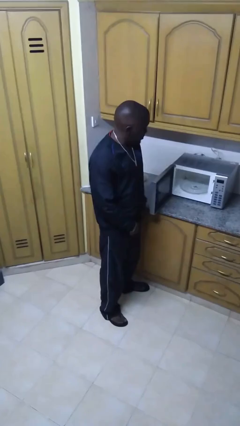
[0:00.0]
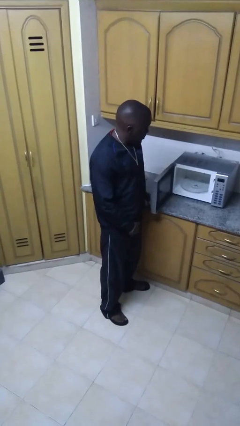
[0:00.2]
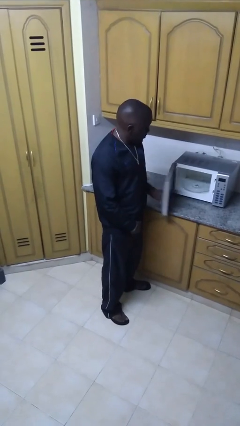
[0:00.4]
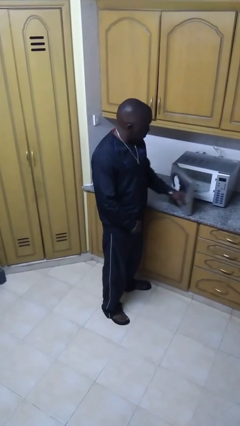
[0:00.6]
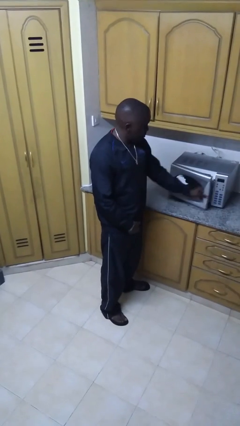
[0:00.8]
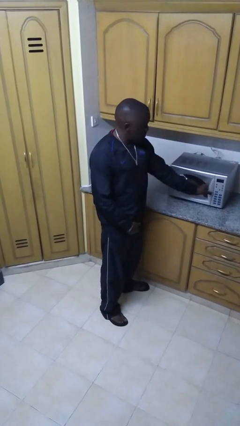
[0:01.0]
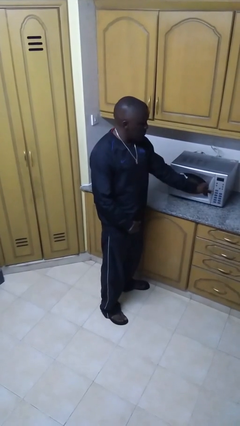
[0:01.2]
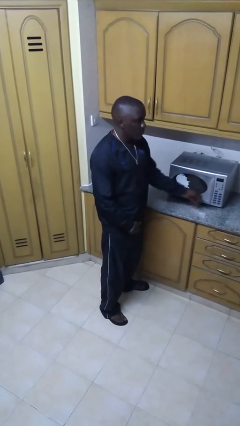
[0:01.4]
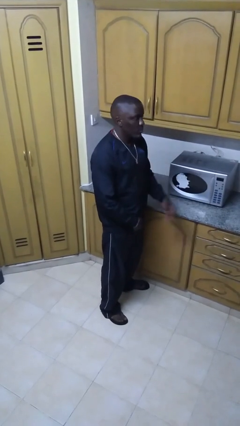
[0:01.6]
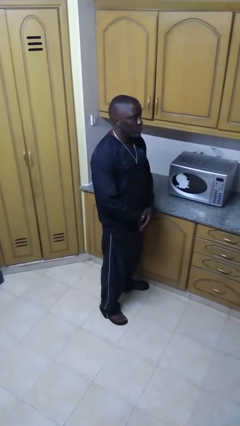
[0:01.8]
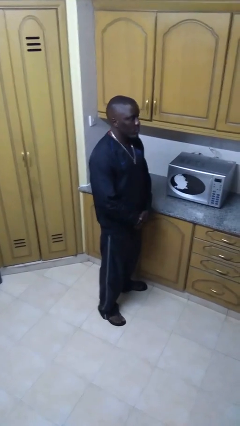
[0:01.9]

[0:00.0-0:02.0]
person closes microwave

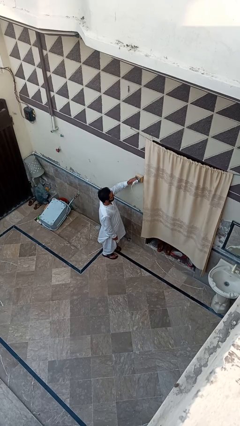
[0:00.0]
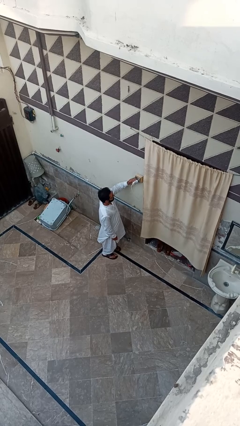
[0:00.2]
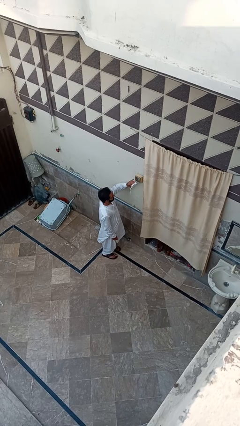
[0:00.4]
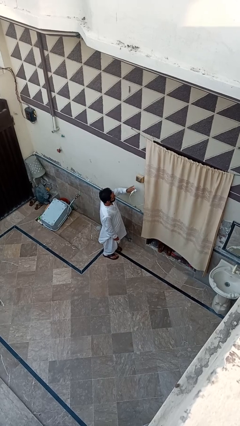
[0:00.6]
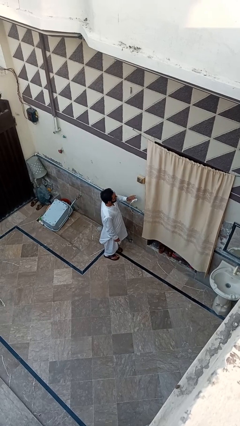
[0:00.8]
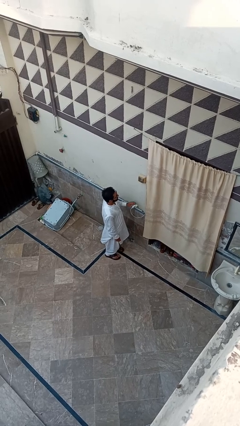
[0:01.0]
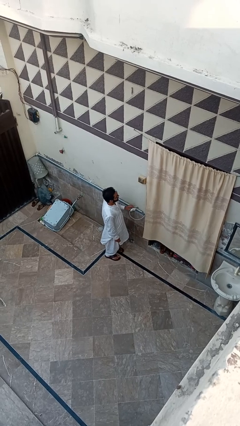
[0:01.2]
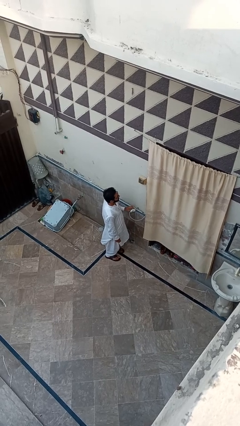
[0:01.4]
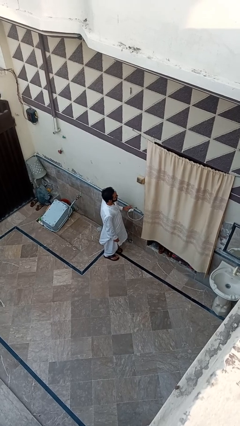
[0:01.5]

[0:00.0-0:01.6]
person unplugs from electrical socket

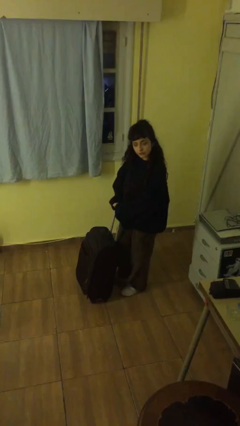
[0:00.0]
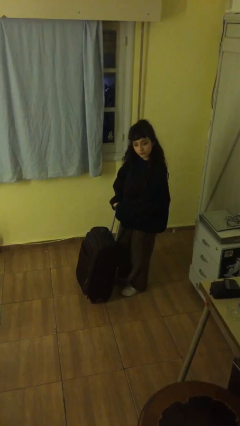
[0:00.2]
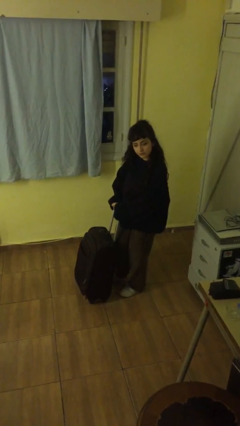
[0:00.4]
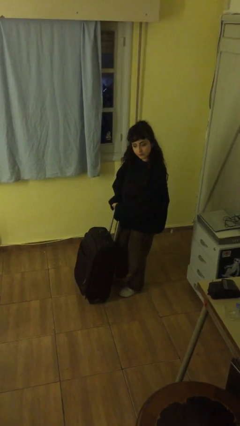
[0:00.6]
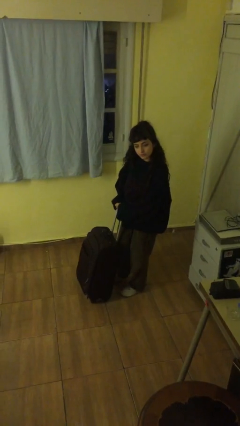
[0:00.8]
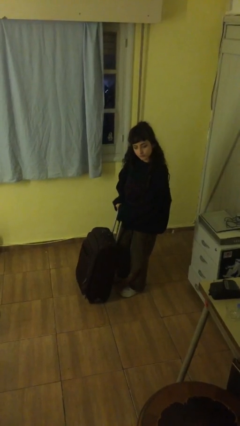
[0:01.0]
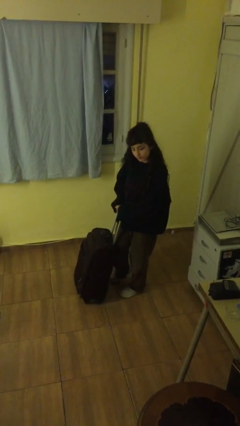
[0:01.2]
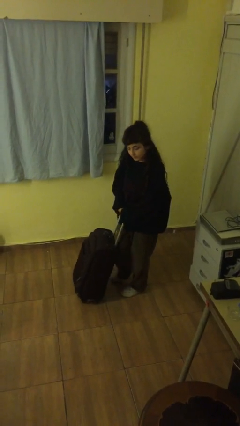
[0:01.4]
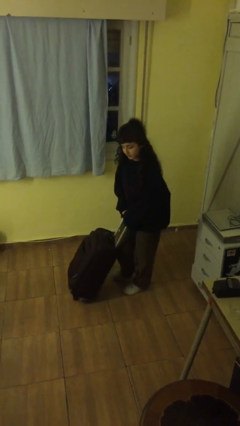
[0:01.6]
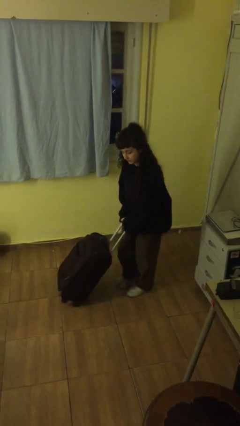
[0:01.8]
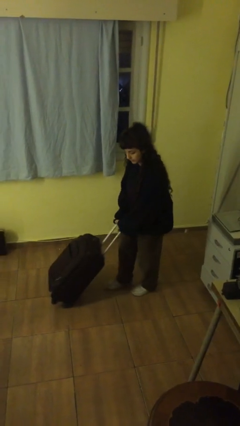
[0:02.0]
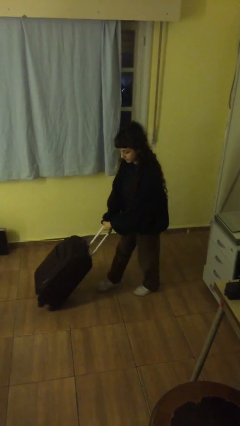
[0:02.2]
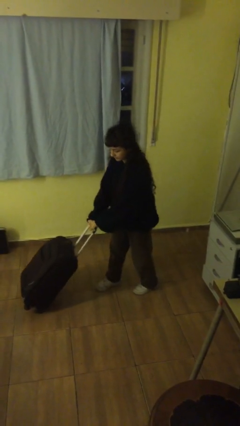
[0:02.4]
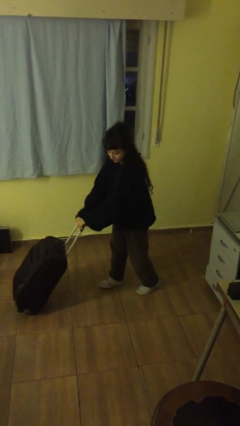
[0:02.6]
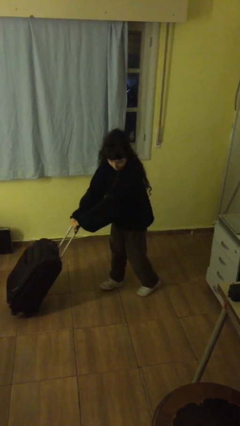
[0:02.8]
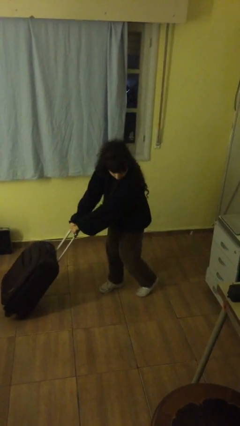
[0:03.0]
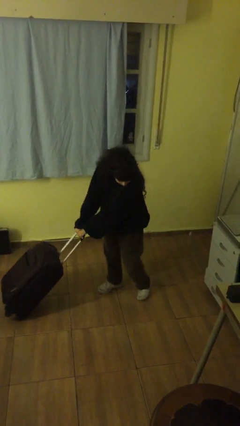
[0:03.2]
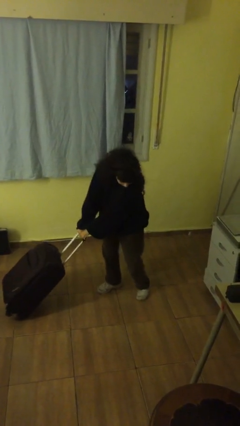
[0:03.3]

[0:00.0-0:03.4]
person pushes wheeled cart

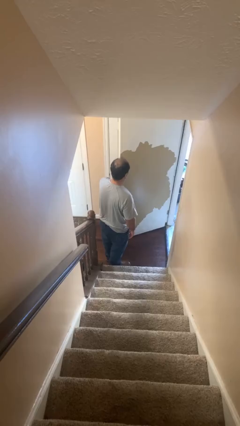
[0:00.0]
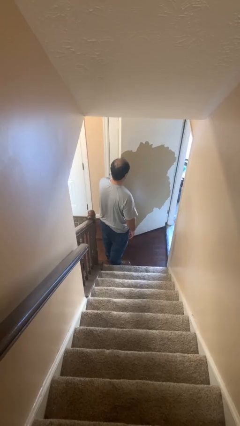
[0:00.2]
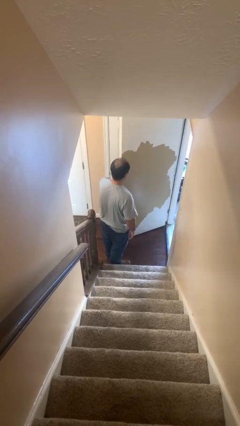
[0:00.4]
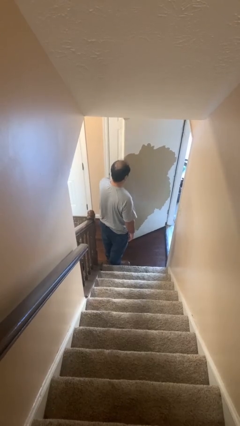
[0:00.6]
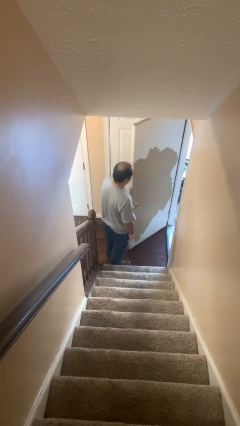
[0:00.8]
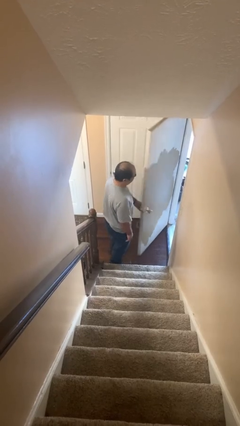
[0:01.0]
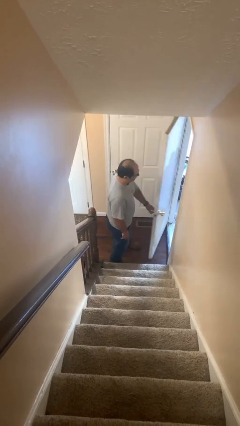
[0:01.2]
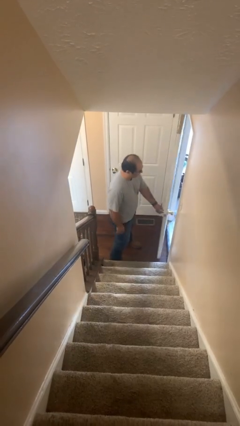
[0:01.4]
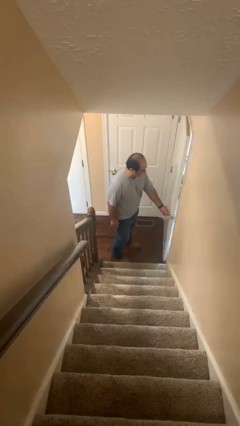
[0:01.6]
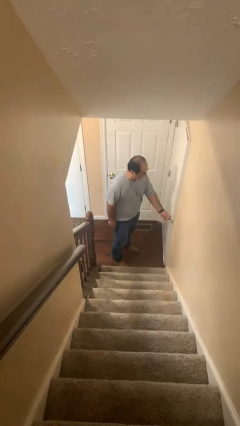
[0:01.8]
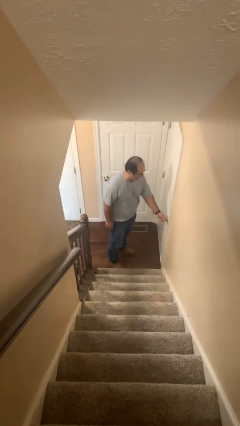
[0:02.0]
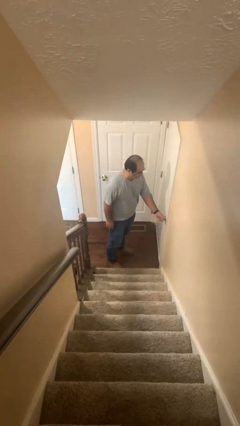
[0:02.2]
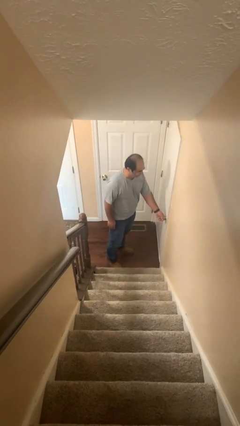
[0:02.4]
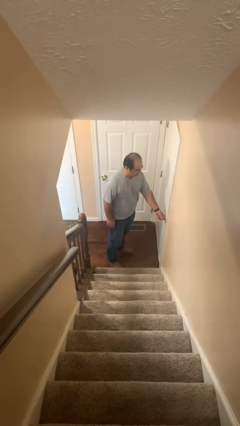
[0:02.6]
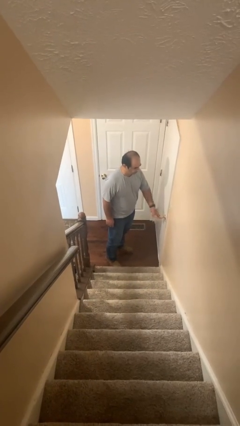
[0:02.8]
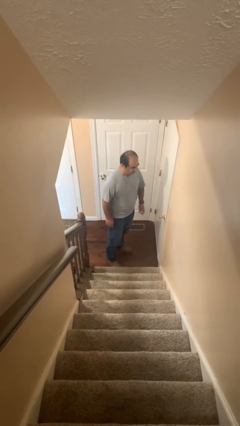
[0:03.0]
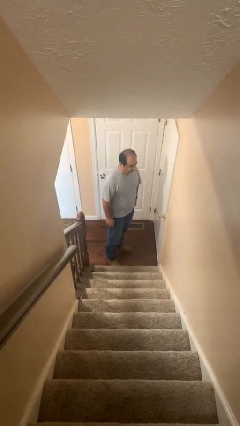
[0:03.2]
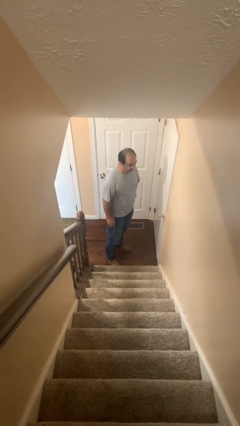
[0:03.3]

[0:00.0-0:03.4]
person closes facility door

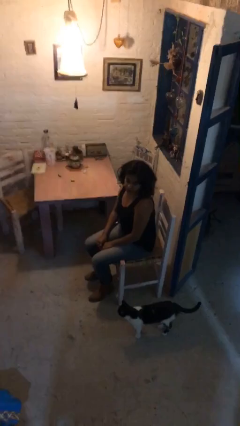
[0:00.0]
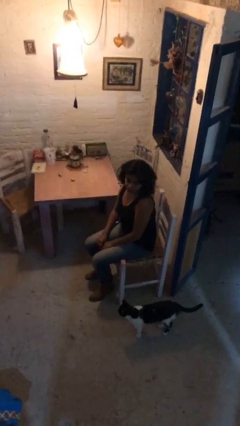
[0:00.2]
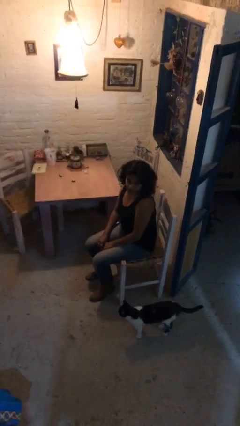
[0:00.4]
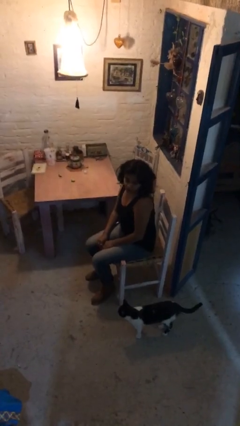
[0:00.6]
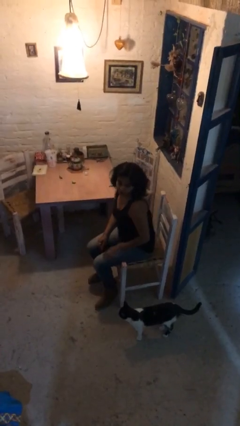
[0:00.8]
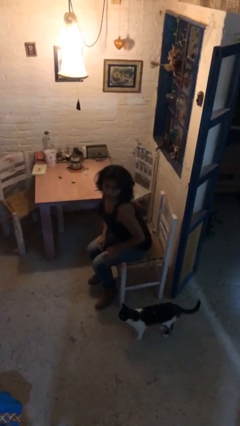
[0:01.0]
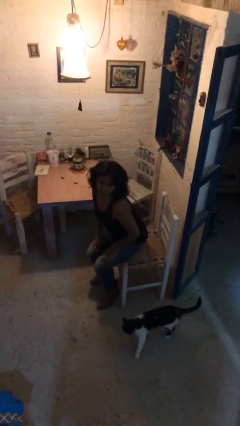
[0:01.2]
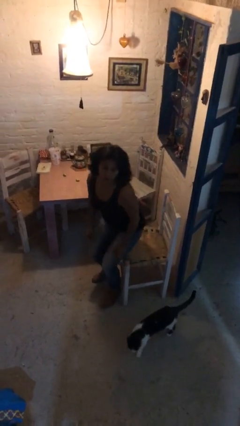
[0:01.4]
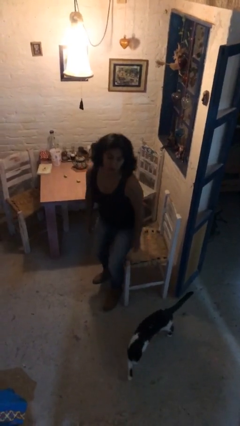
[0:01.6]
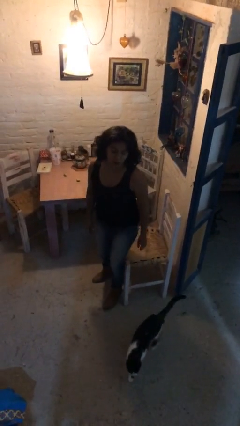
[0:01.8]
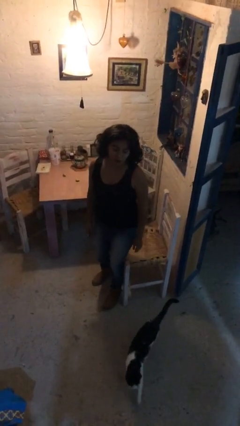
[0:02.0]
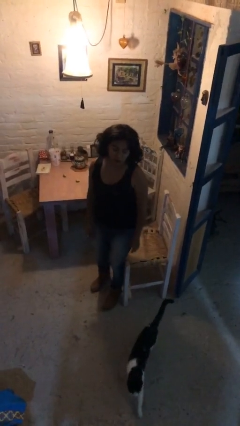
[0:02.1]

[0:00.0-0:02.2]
person stands up

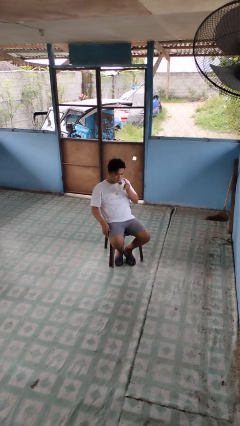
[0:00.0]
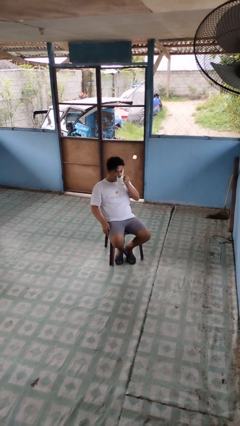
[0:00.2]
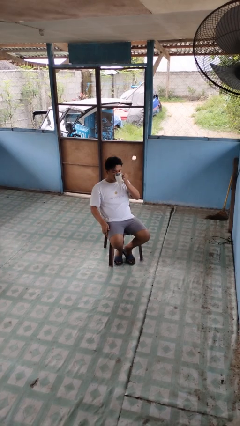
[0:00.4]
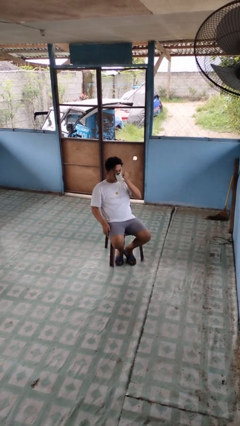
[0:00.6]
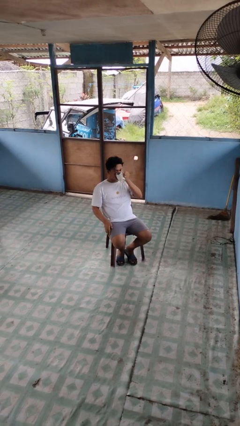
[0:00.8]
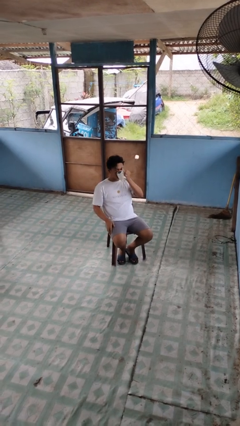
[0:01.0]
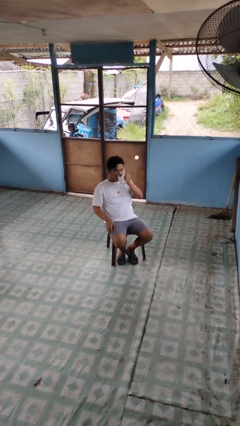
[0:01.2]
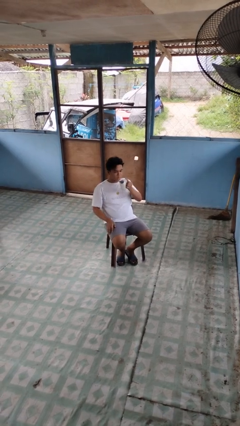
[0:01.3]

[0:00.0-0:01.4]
person drinks from mug

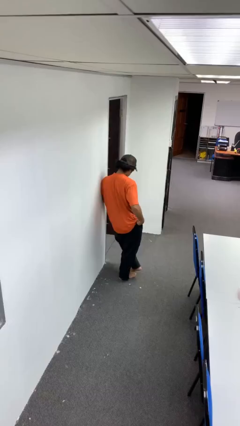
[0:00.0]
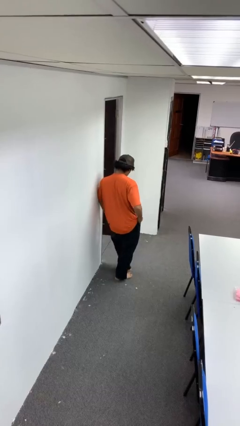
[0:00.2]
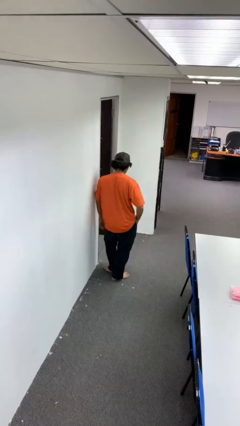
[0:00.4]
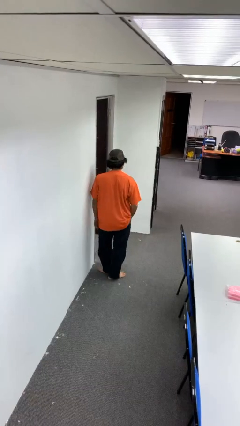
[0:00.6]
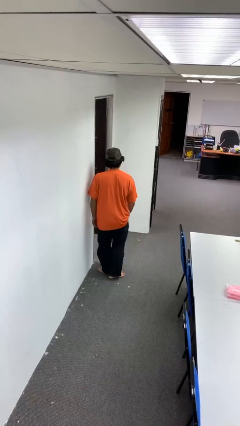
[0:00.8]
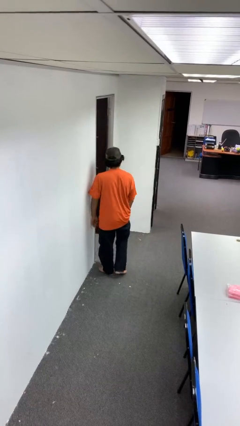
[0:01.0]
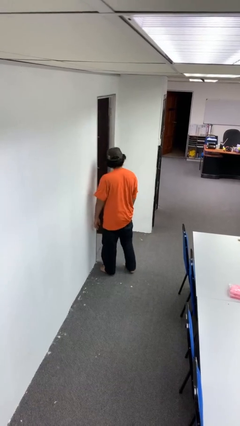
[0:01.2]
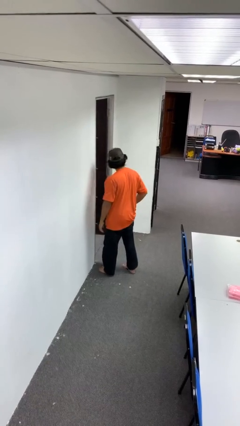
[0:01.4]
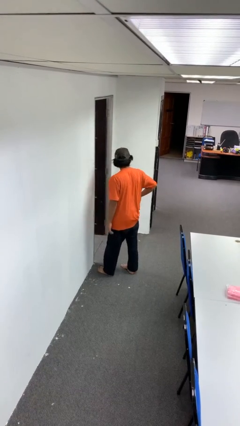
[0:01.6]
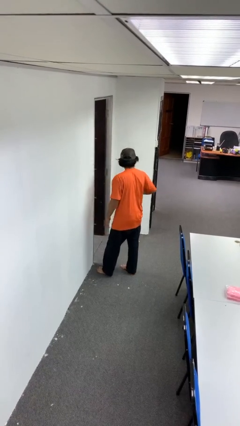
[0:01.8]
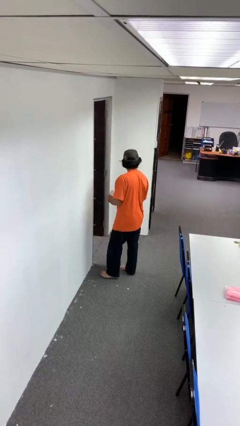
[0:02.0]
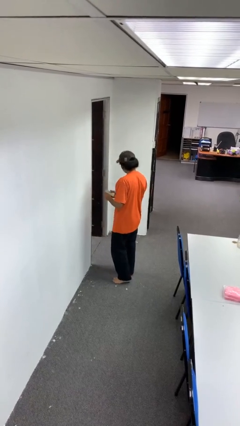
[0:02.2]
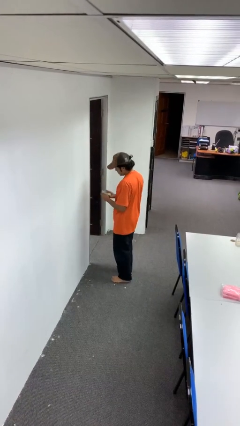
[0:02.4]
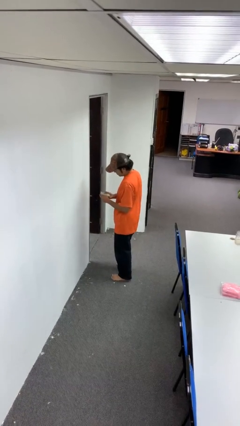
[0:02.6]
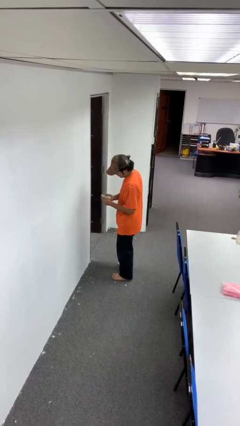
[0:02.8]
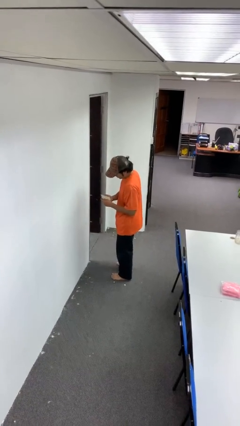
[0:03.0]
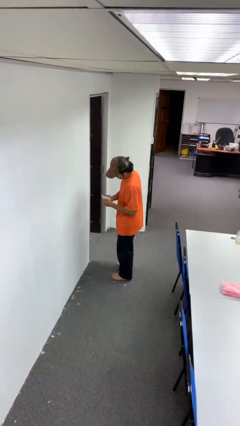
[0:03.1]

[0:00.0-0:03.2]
person takes phone from pocket
